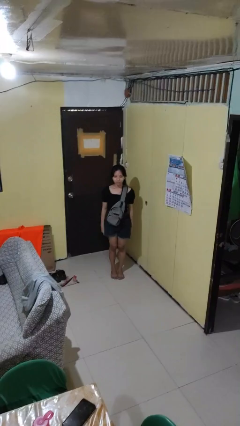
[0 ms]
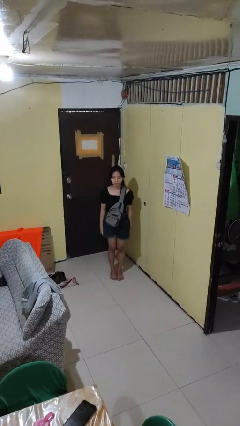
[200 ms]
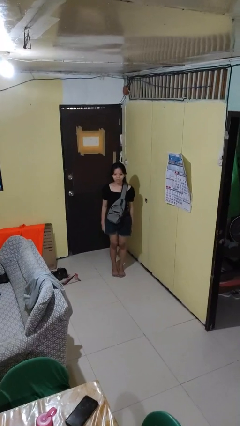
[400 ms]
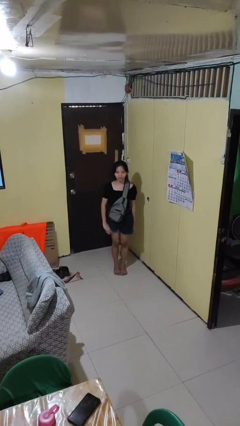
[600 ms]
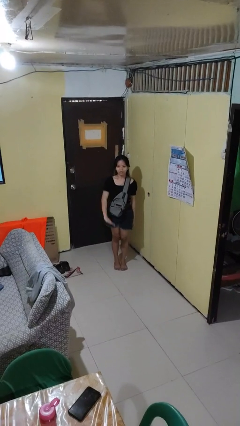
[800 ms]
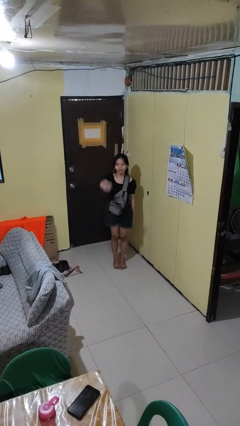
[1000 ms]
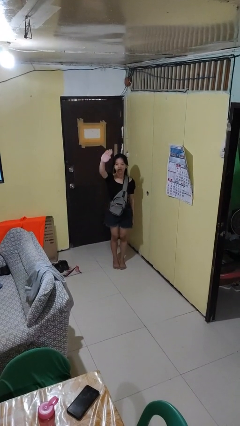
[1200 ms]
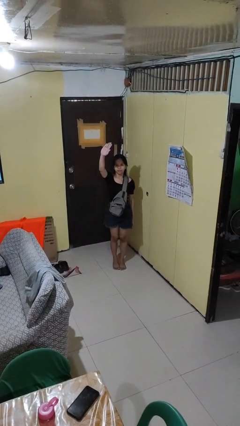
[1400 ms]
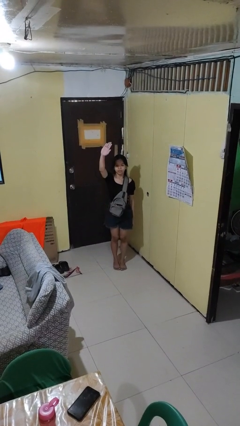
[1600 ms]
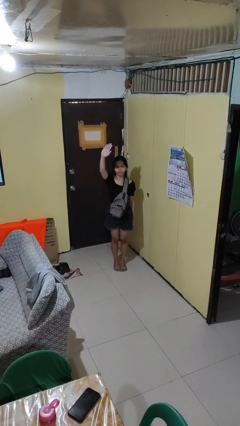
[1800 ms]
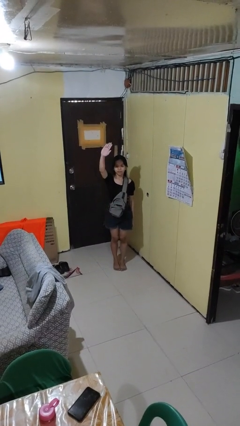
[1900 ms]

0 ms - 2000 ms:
person gestures swipe up

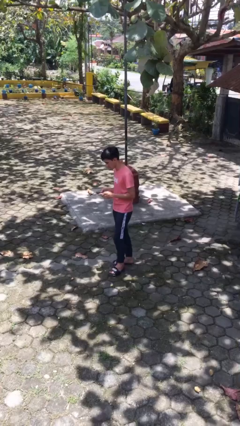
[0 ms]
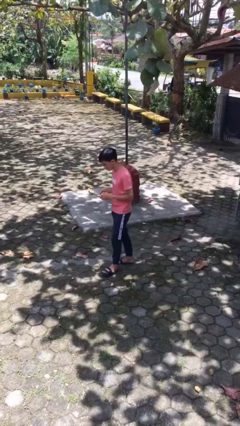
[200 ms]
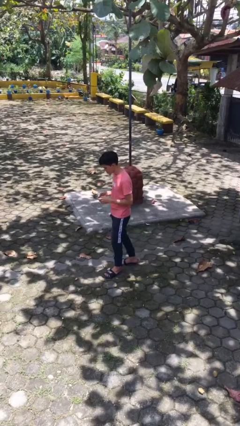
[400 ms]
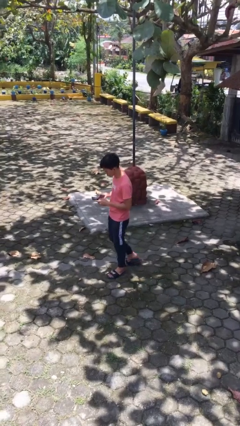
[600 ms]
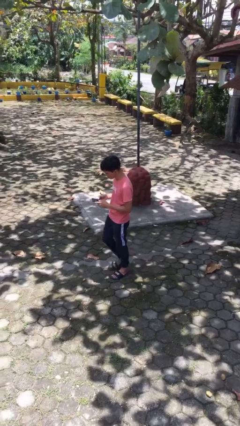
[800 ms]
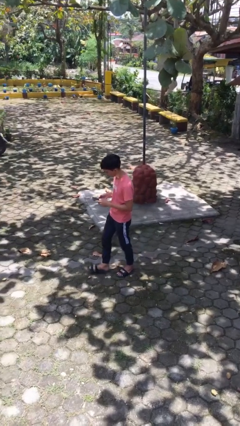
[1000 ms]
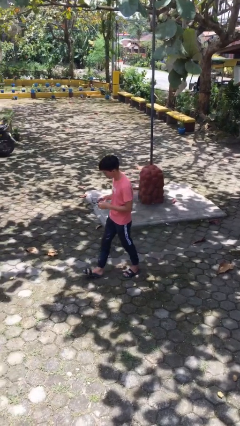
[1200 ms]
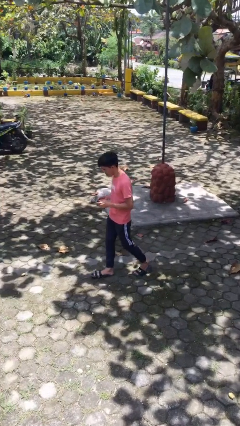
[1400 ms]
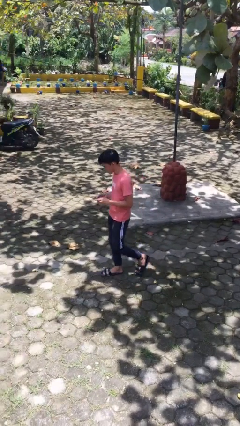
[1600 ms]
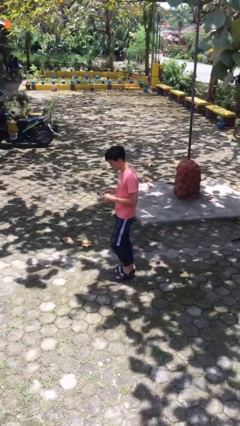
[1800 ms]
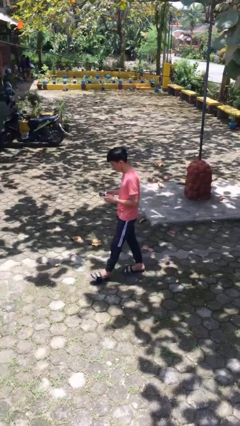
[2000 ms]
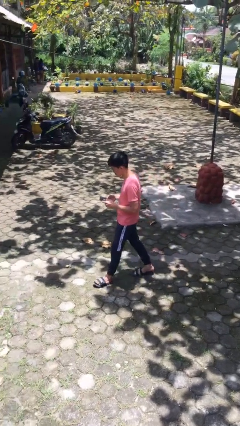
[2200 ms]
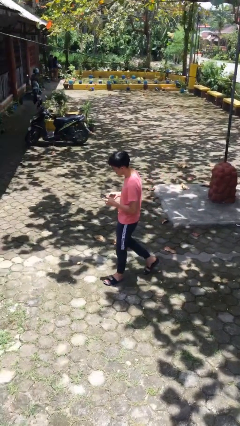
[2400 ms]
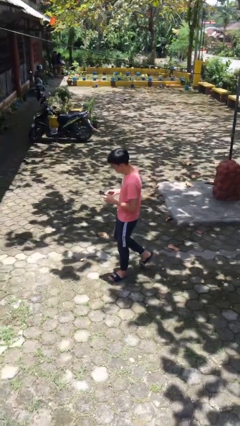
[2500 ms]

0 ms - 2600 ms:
person texts on phone

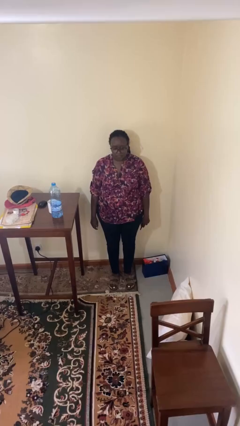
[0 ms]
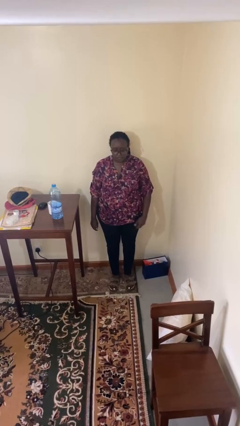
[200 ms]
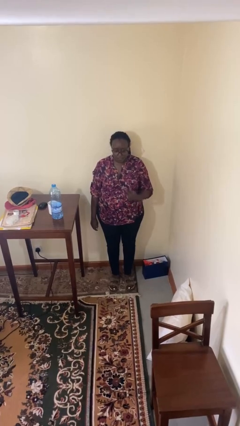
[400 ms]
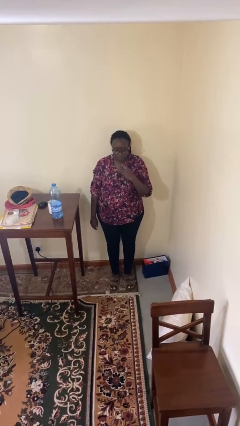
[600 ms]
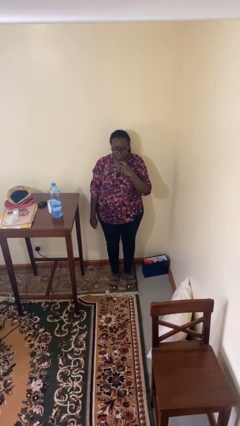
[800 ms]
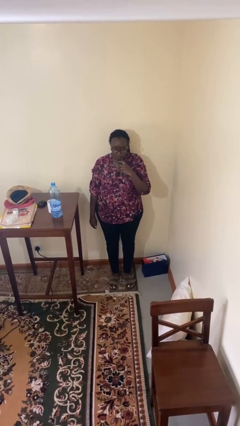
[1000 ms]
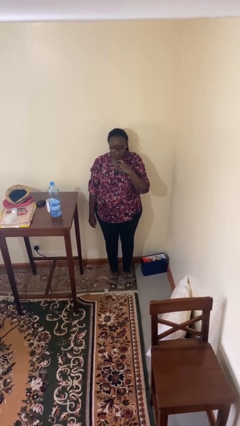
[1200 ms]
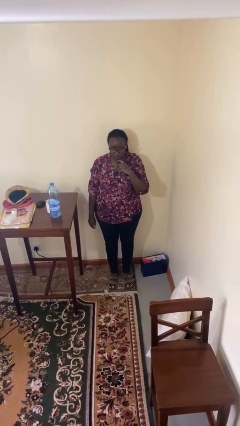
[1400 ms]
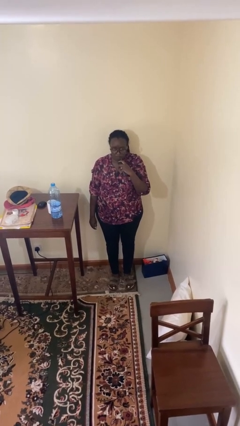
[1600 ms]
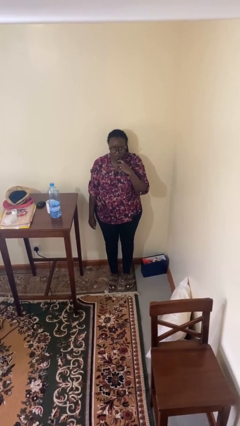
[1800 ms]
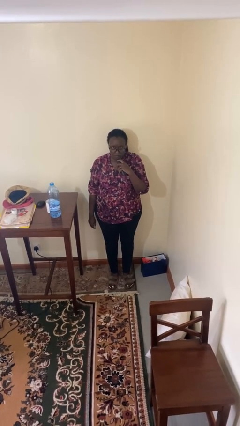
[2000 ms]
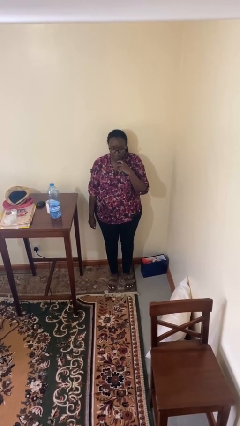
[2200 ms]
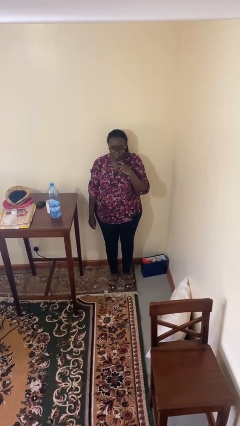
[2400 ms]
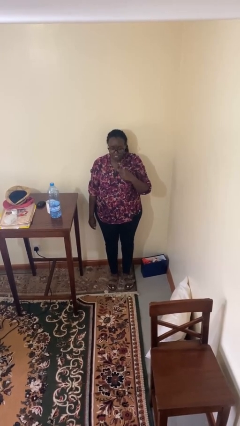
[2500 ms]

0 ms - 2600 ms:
person vapes

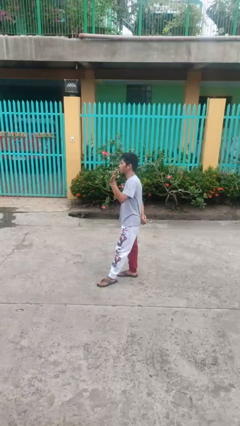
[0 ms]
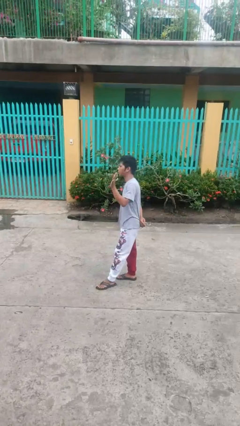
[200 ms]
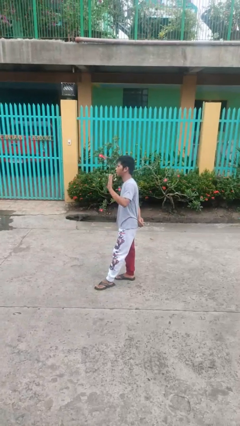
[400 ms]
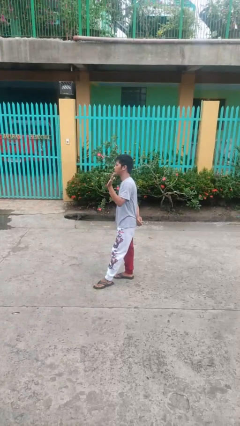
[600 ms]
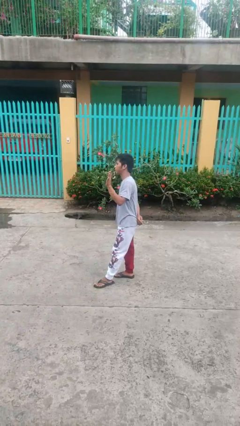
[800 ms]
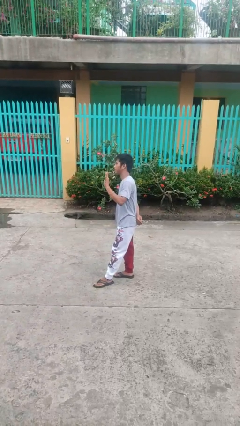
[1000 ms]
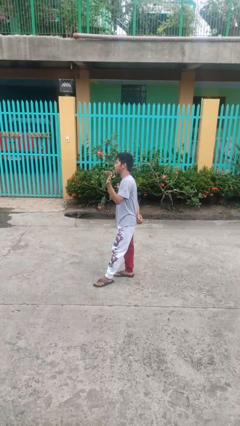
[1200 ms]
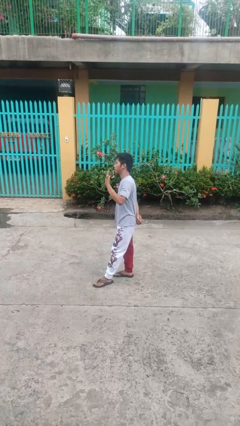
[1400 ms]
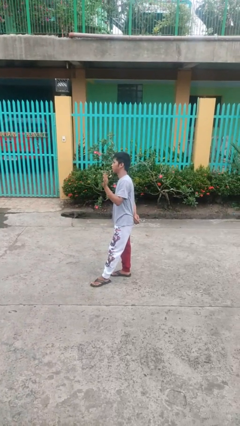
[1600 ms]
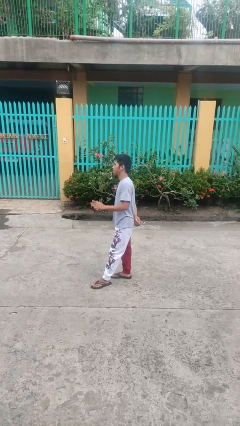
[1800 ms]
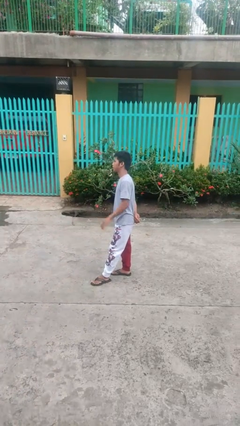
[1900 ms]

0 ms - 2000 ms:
person waves at person

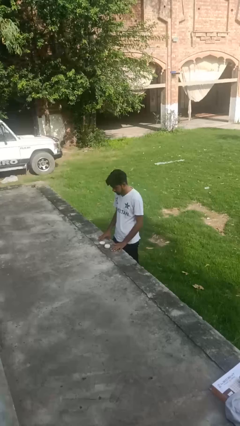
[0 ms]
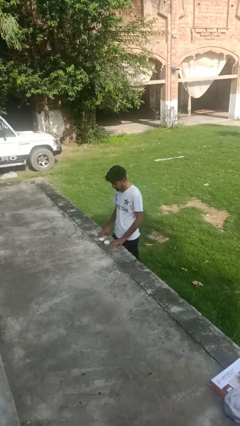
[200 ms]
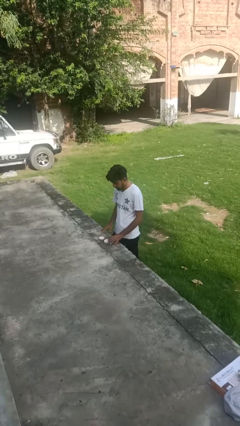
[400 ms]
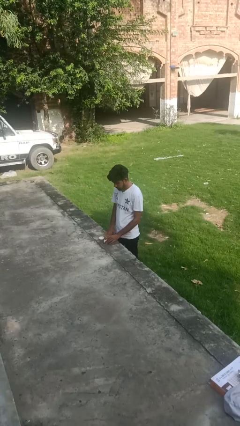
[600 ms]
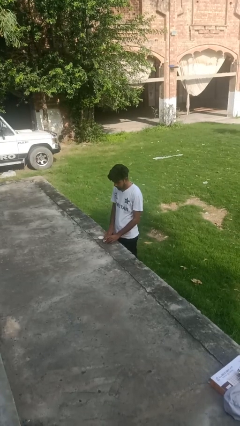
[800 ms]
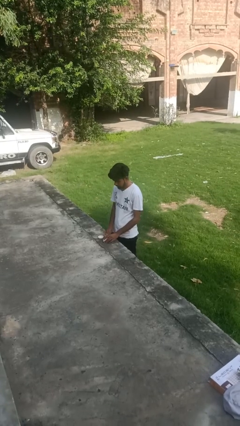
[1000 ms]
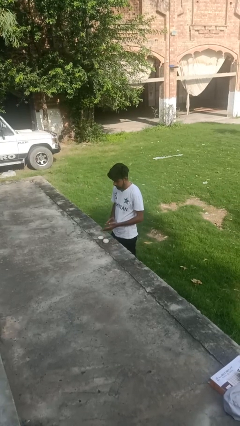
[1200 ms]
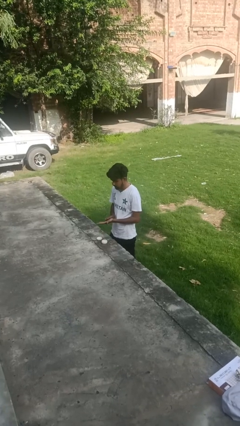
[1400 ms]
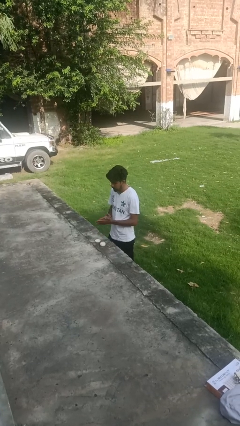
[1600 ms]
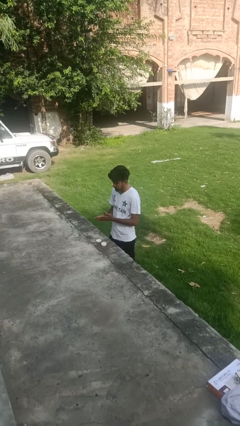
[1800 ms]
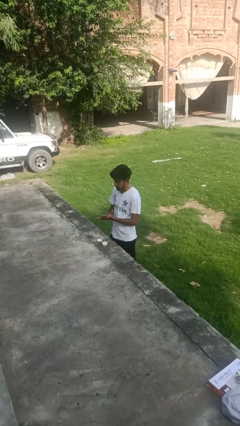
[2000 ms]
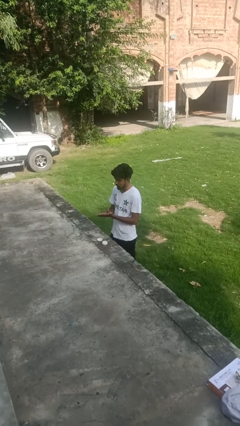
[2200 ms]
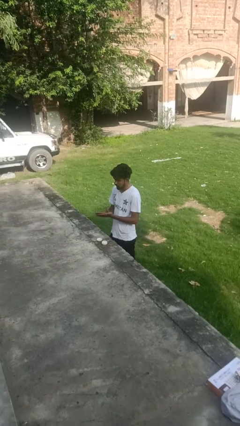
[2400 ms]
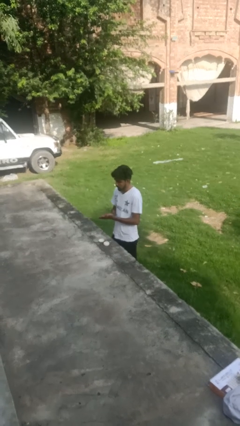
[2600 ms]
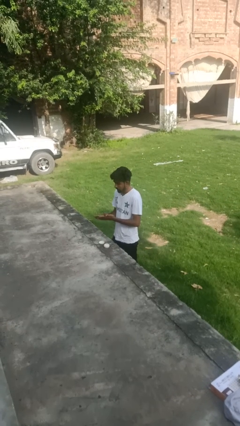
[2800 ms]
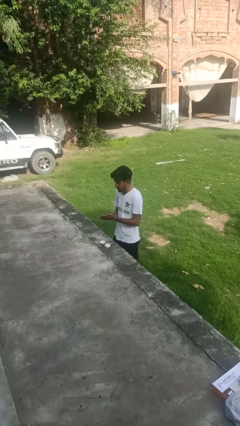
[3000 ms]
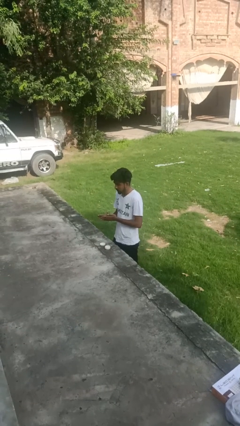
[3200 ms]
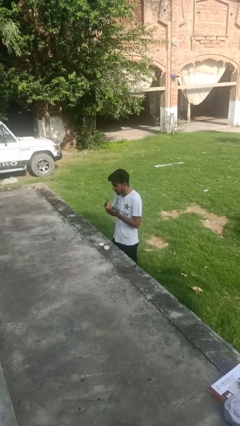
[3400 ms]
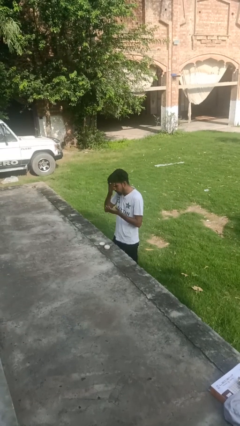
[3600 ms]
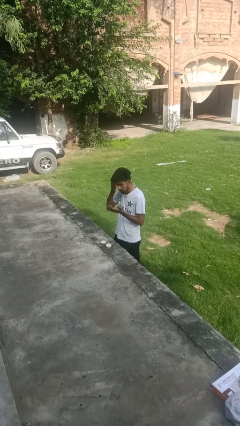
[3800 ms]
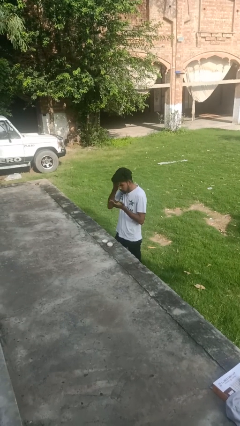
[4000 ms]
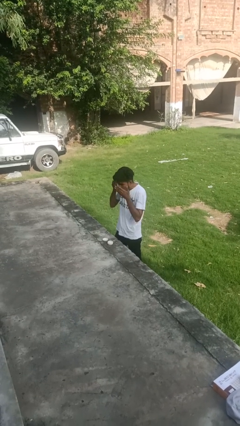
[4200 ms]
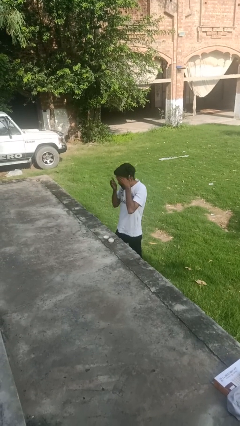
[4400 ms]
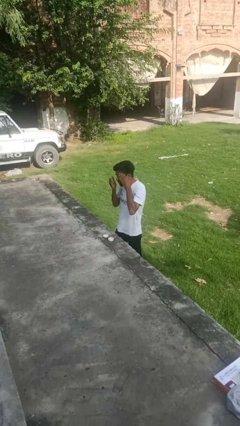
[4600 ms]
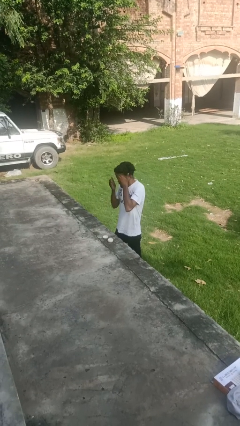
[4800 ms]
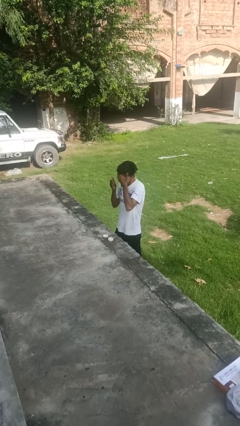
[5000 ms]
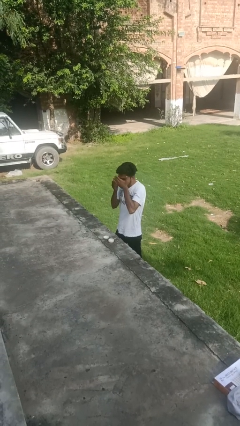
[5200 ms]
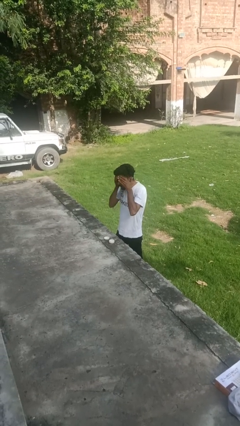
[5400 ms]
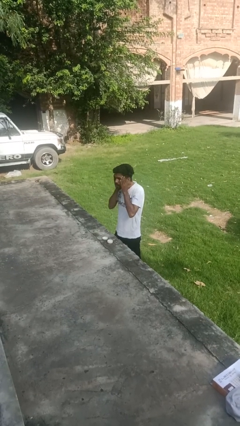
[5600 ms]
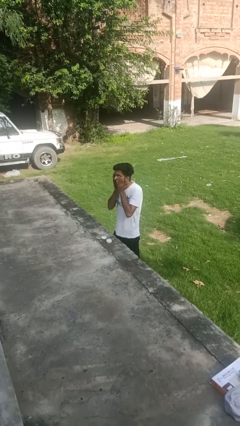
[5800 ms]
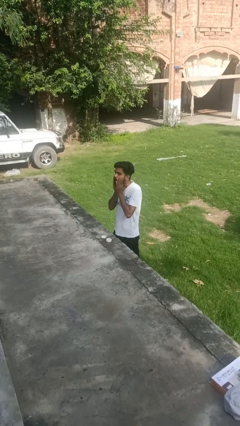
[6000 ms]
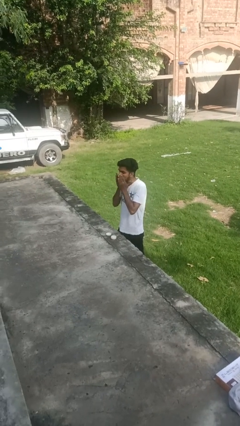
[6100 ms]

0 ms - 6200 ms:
person applies facial moisturizer

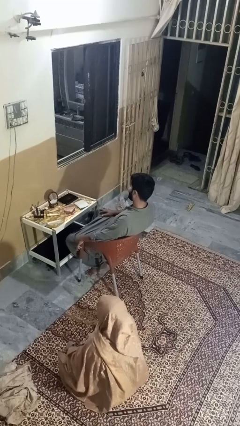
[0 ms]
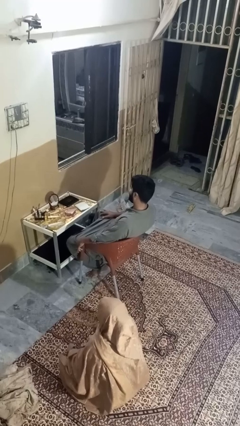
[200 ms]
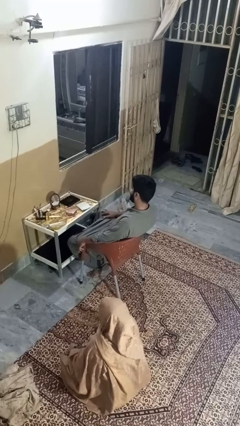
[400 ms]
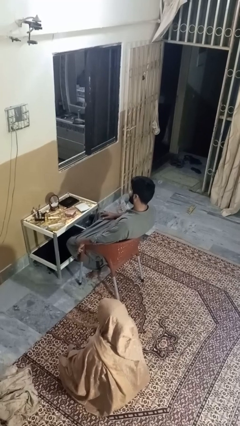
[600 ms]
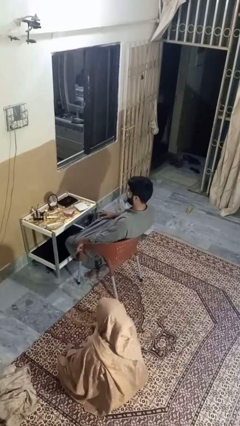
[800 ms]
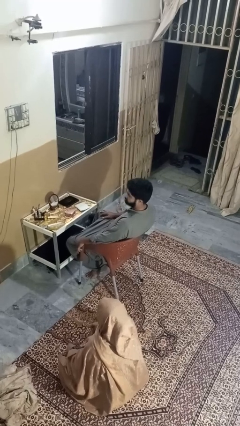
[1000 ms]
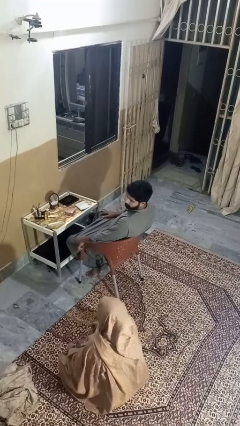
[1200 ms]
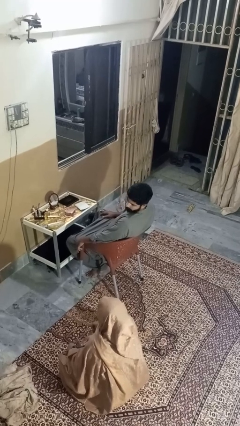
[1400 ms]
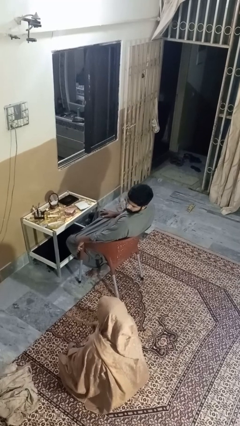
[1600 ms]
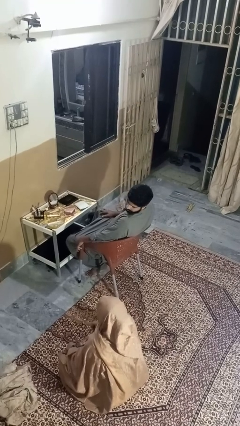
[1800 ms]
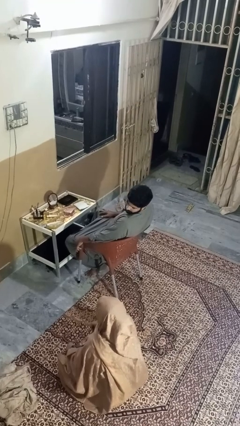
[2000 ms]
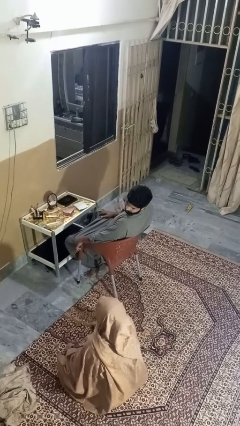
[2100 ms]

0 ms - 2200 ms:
person looks over shoulder
